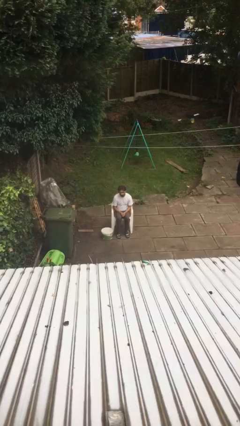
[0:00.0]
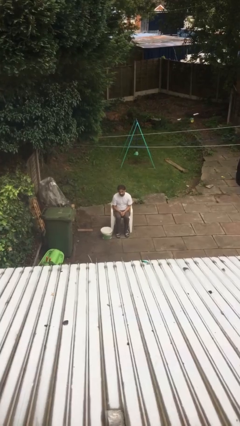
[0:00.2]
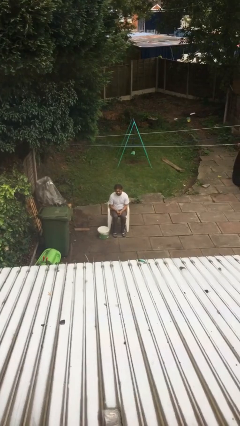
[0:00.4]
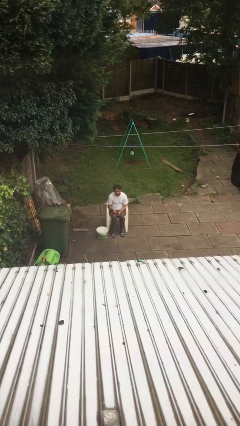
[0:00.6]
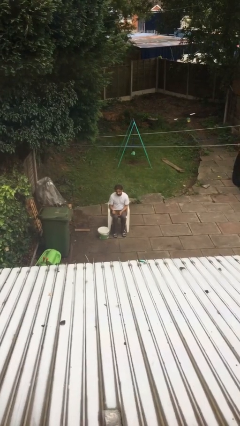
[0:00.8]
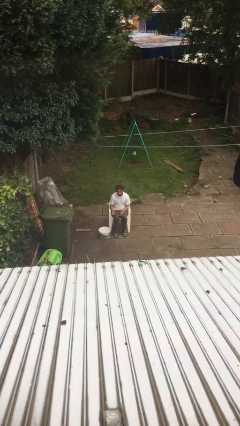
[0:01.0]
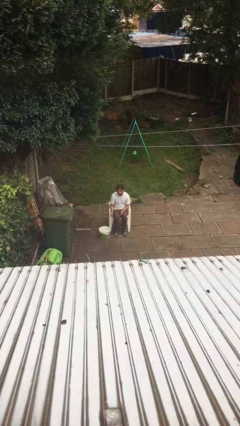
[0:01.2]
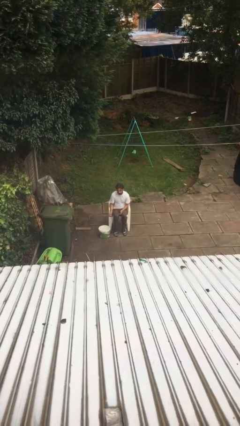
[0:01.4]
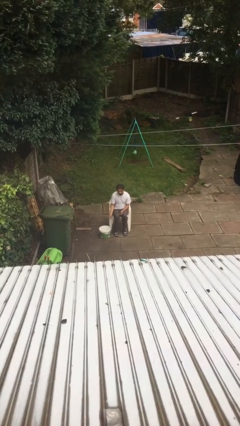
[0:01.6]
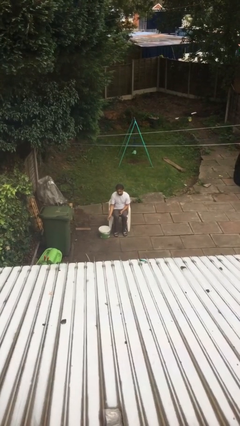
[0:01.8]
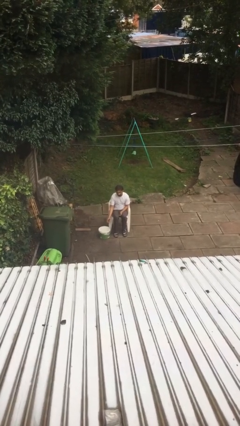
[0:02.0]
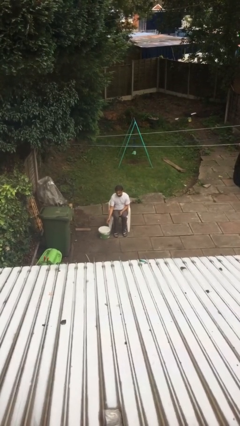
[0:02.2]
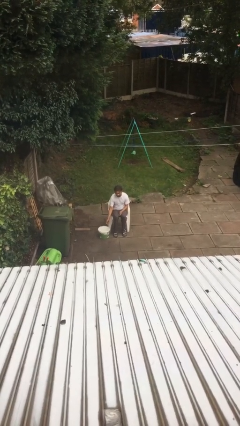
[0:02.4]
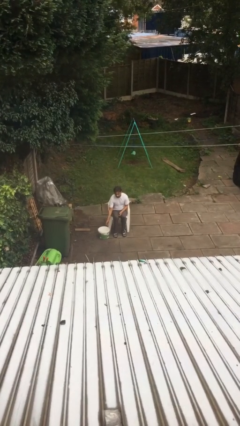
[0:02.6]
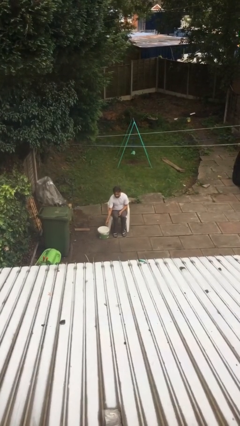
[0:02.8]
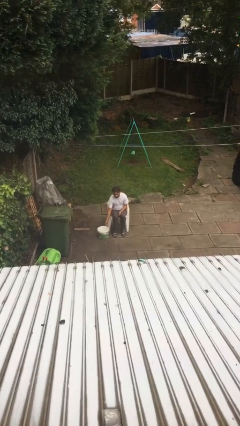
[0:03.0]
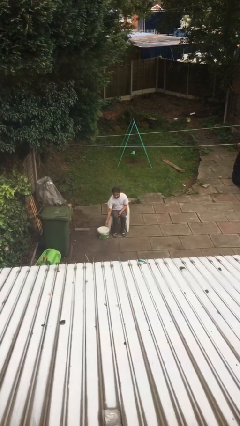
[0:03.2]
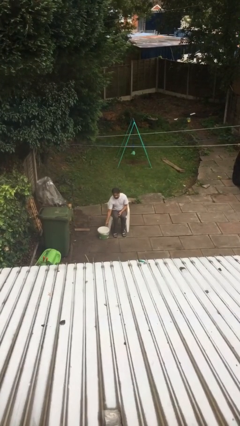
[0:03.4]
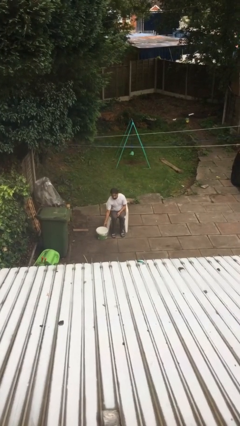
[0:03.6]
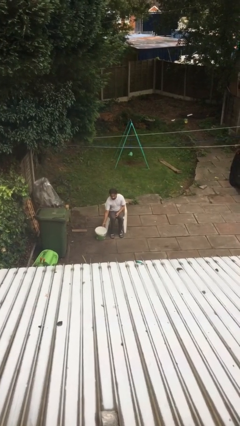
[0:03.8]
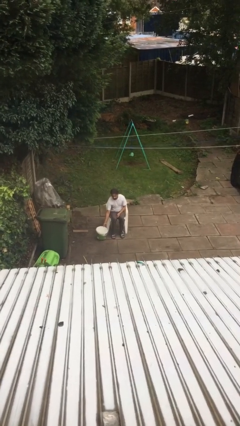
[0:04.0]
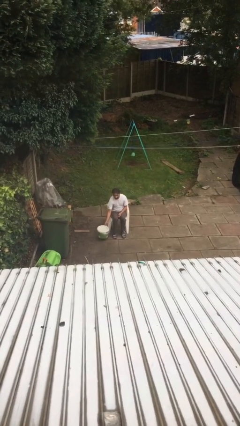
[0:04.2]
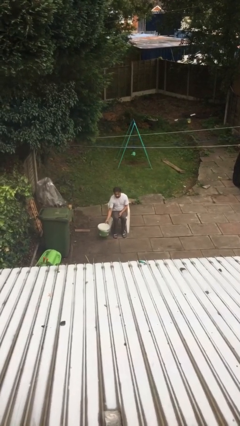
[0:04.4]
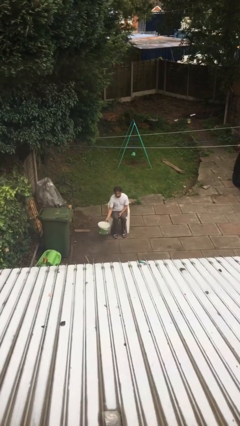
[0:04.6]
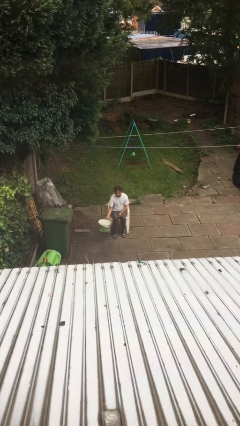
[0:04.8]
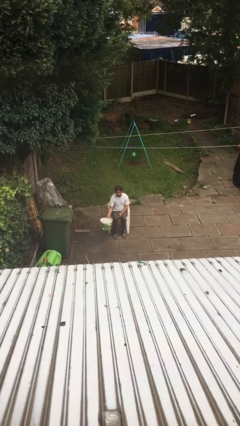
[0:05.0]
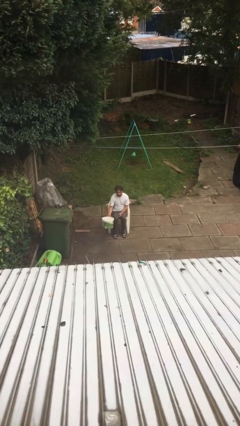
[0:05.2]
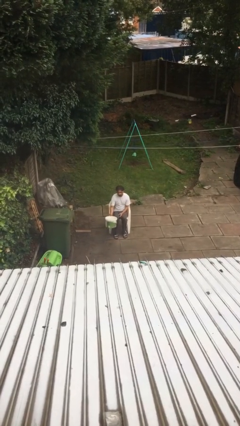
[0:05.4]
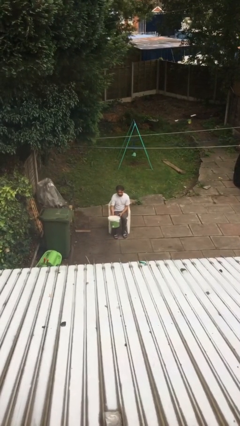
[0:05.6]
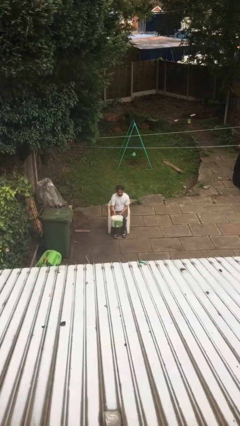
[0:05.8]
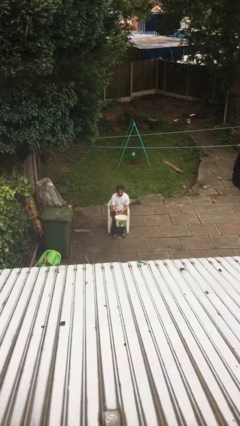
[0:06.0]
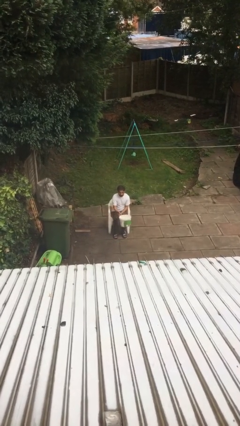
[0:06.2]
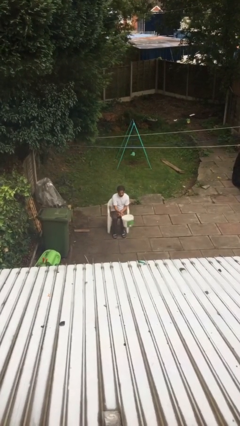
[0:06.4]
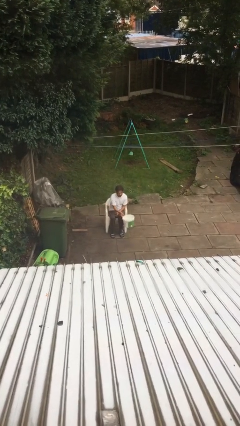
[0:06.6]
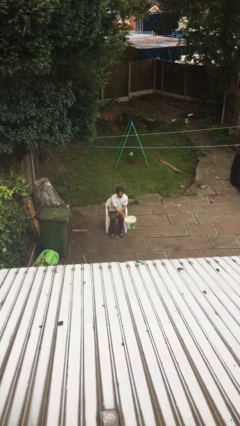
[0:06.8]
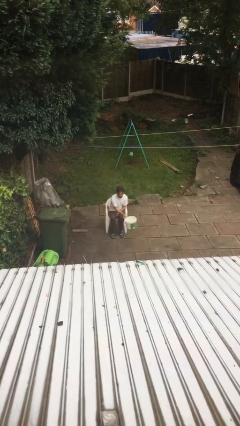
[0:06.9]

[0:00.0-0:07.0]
person picks up object from floor

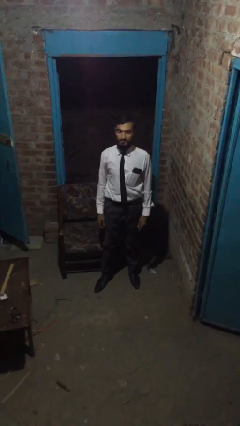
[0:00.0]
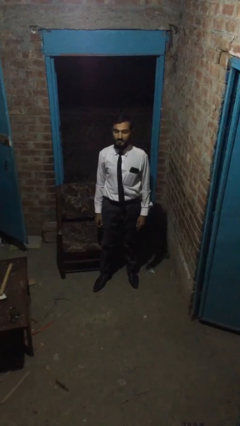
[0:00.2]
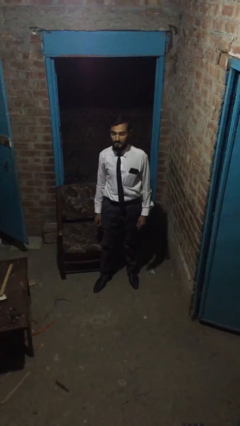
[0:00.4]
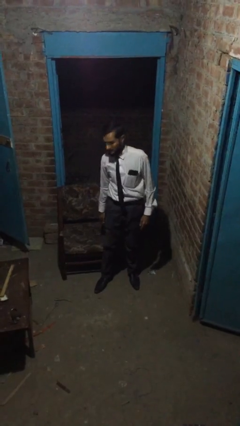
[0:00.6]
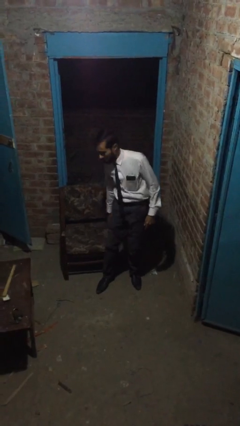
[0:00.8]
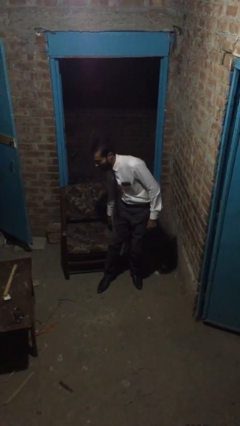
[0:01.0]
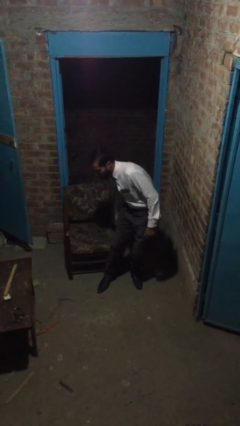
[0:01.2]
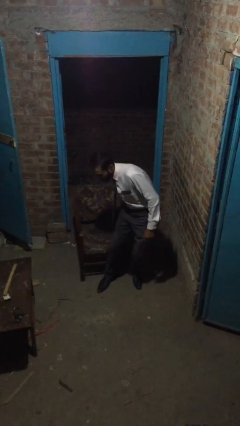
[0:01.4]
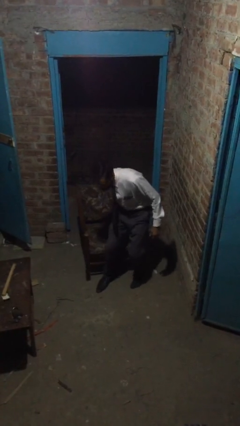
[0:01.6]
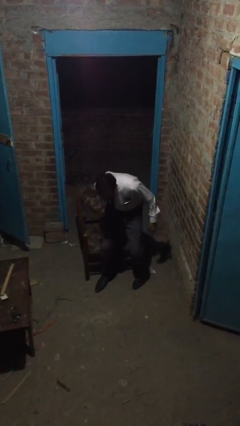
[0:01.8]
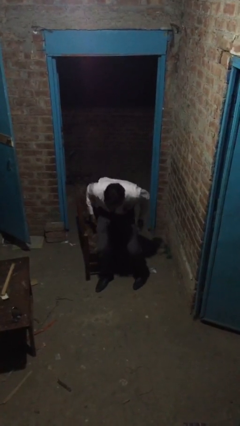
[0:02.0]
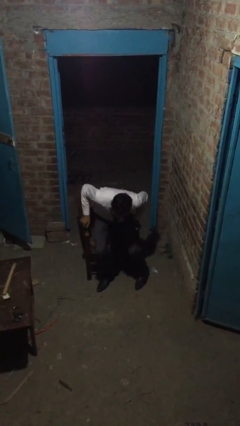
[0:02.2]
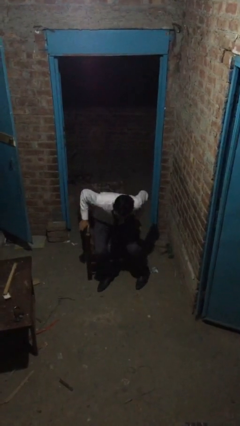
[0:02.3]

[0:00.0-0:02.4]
person sits down

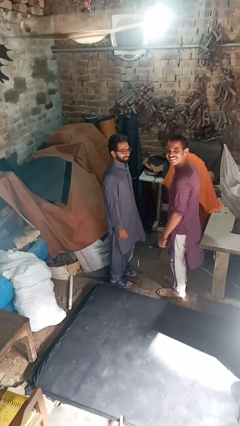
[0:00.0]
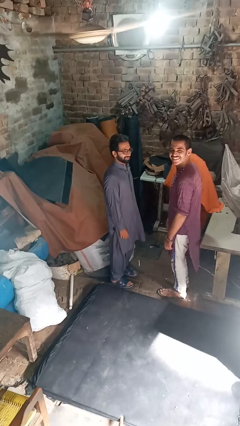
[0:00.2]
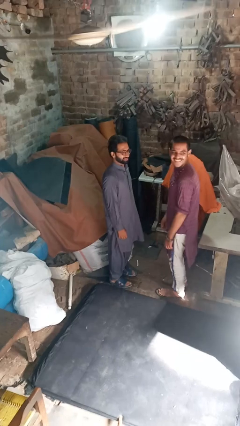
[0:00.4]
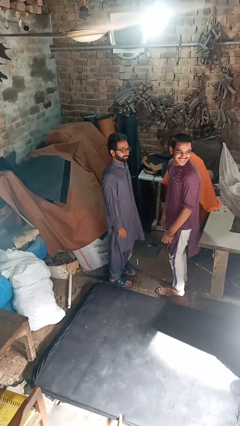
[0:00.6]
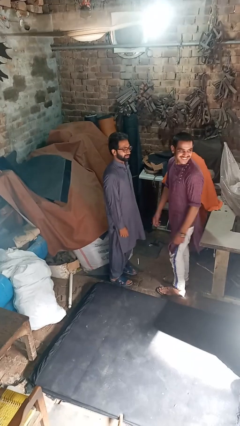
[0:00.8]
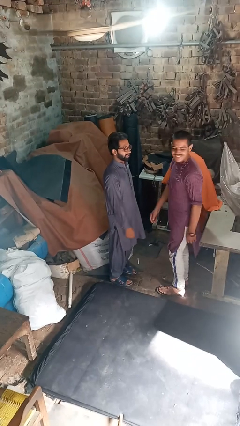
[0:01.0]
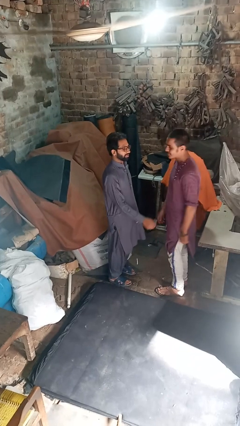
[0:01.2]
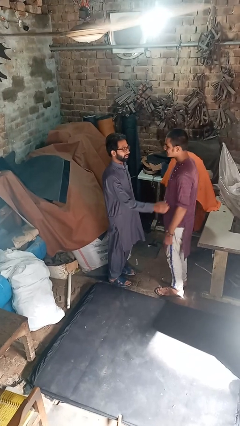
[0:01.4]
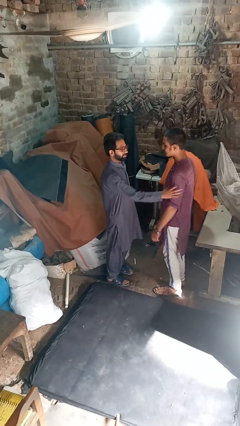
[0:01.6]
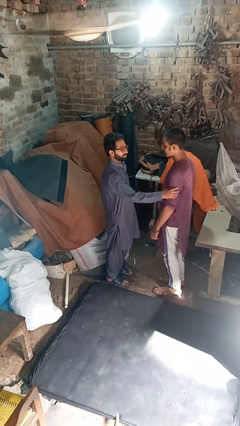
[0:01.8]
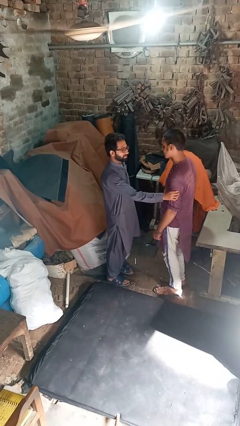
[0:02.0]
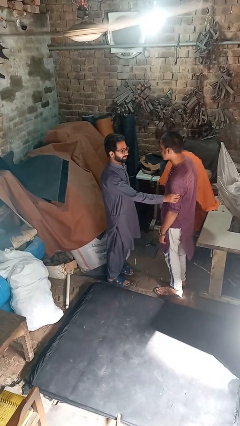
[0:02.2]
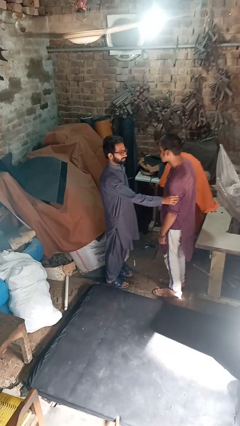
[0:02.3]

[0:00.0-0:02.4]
person grabs person by forearm

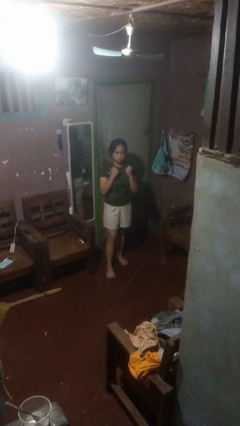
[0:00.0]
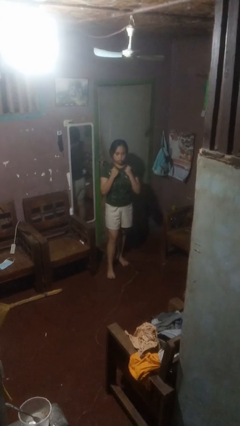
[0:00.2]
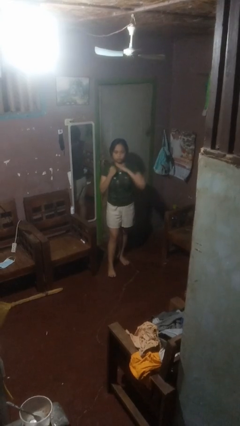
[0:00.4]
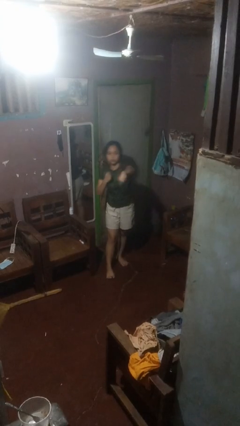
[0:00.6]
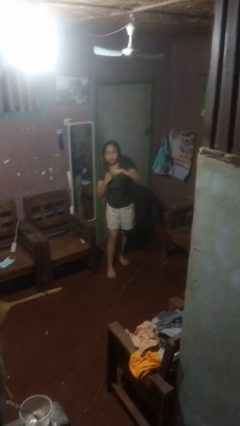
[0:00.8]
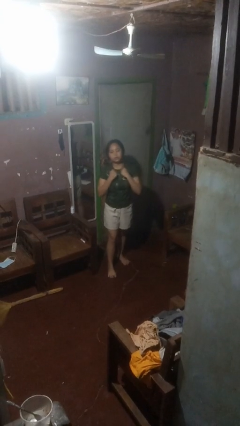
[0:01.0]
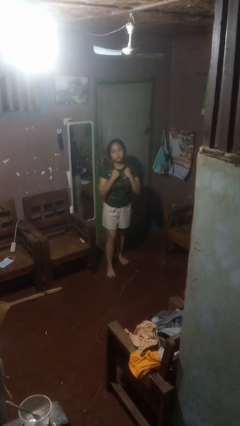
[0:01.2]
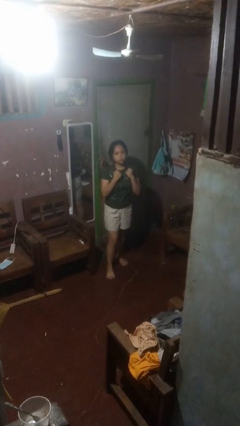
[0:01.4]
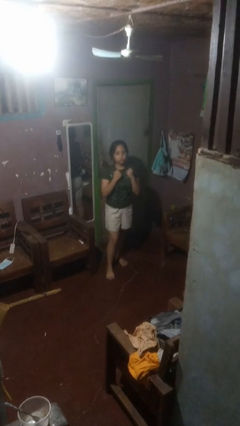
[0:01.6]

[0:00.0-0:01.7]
person punches

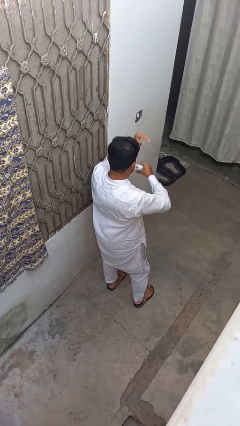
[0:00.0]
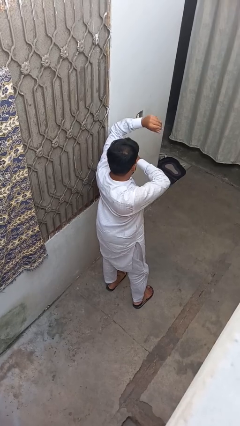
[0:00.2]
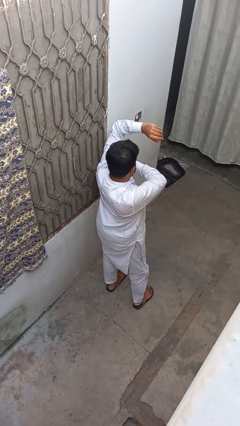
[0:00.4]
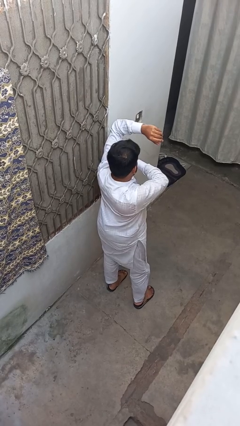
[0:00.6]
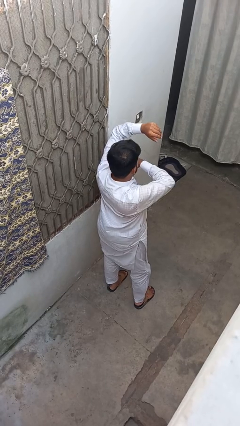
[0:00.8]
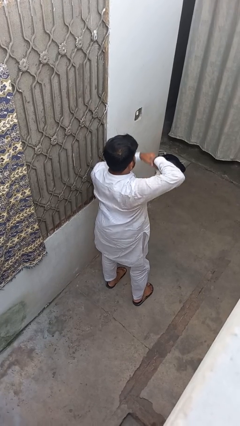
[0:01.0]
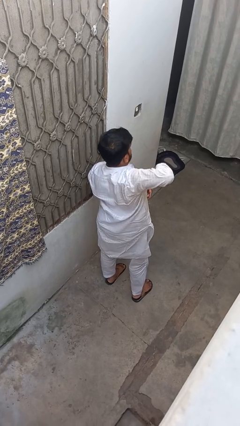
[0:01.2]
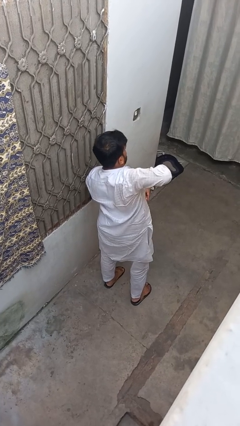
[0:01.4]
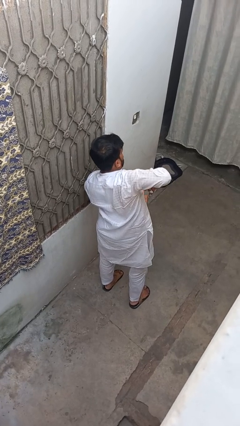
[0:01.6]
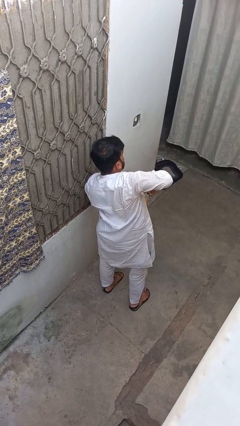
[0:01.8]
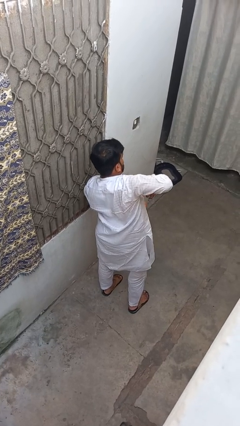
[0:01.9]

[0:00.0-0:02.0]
person applies deodorant

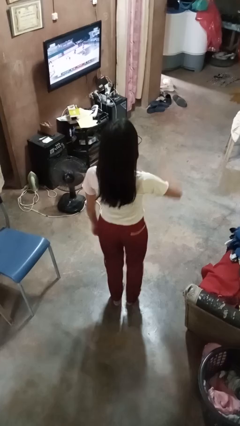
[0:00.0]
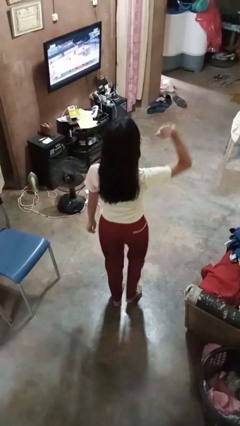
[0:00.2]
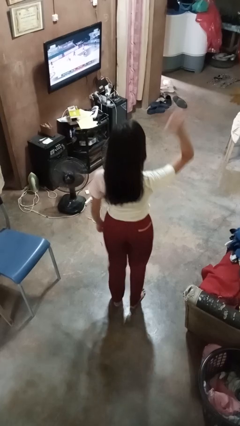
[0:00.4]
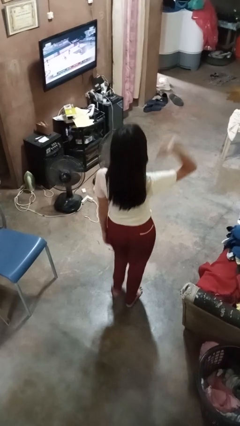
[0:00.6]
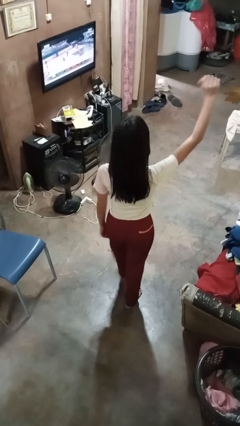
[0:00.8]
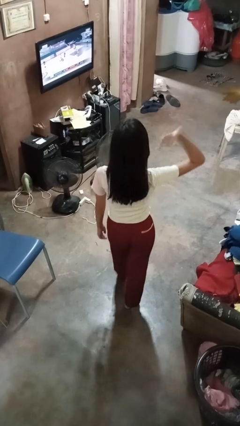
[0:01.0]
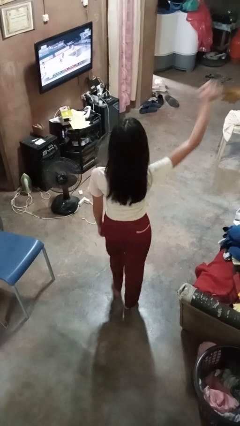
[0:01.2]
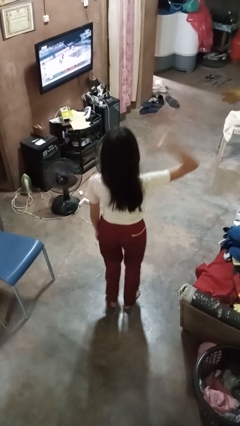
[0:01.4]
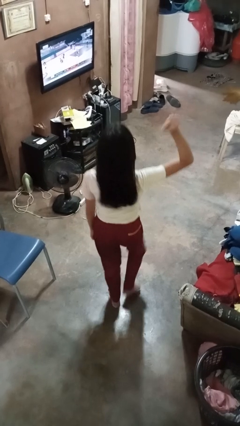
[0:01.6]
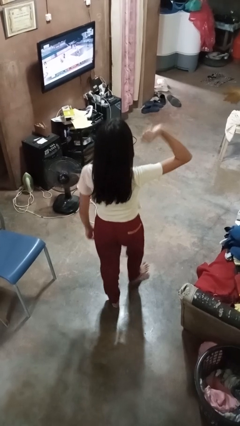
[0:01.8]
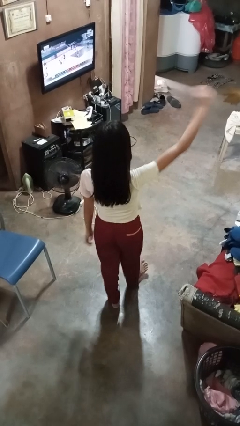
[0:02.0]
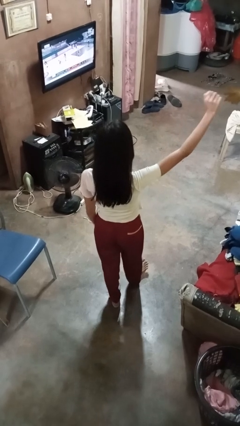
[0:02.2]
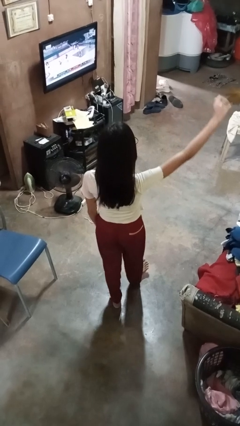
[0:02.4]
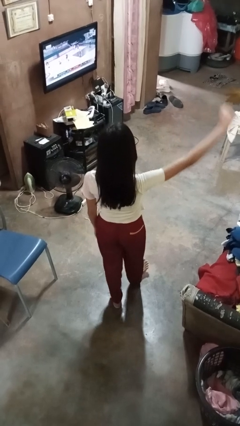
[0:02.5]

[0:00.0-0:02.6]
person dances in place
